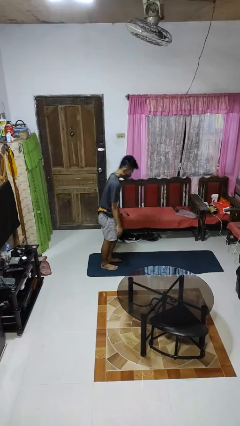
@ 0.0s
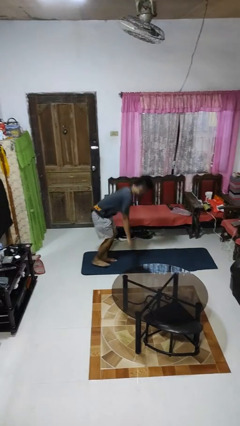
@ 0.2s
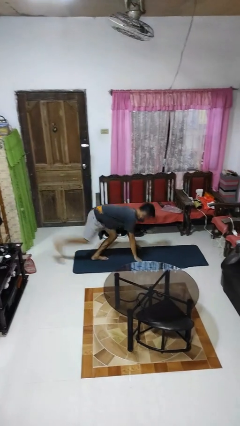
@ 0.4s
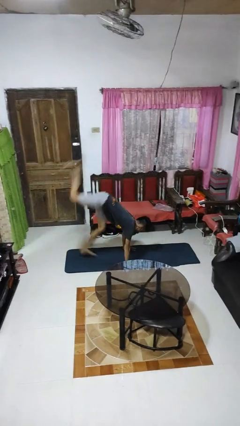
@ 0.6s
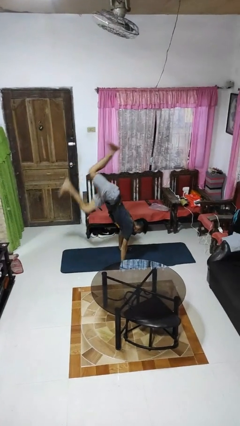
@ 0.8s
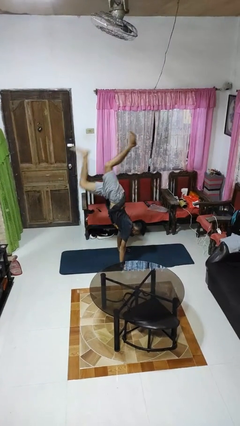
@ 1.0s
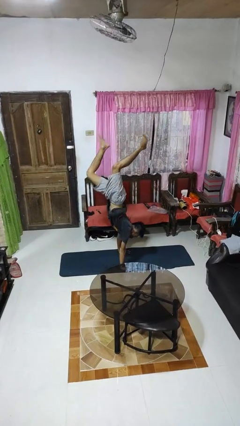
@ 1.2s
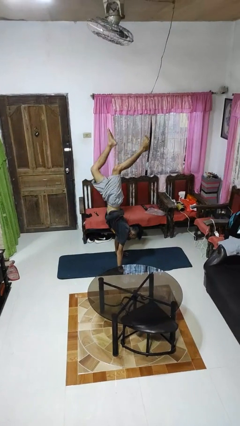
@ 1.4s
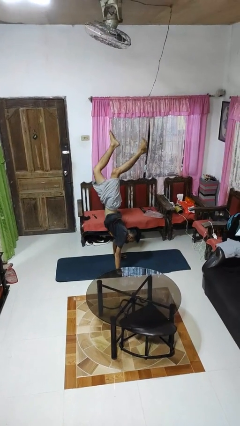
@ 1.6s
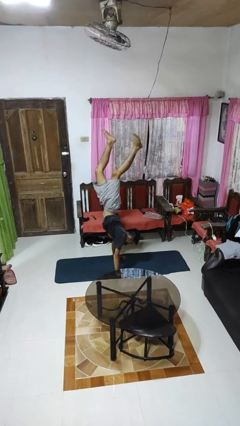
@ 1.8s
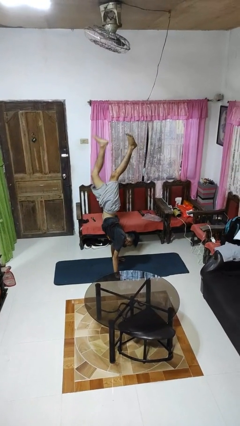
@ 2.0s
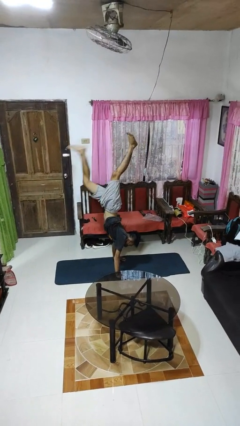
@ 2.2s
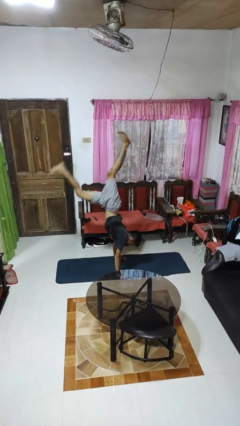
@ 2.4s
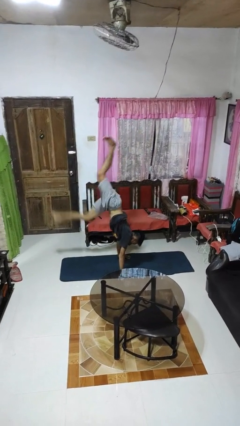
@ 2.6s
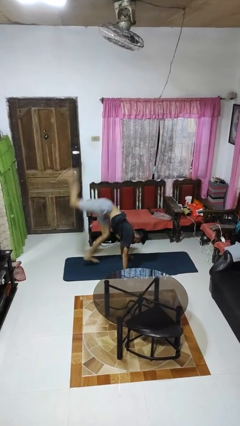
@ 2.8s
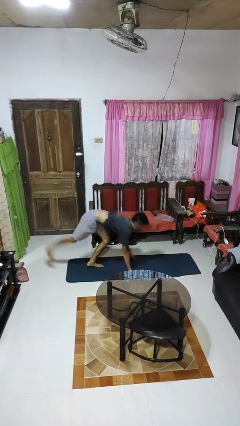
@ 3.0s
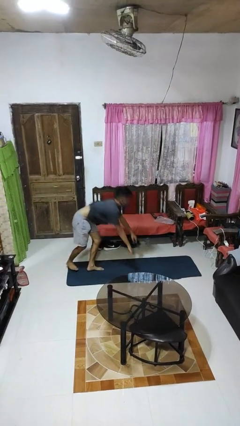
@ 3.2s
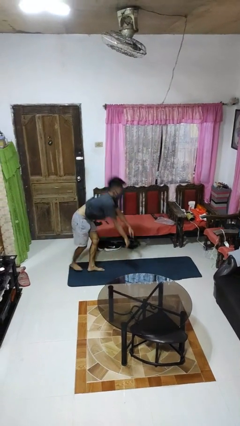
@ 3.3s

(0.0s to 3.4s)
person handstand

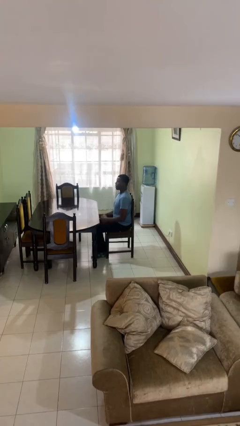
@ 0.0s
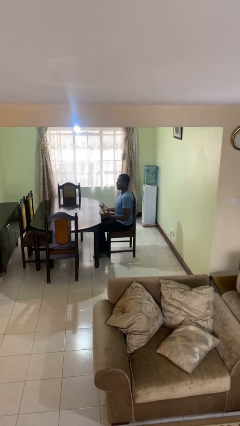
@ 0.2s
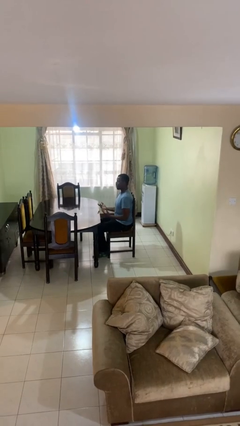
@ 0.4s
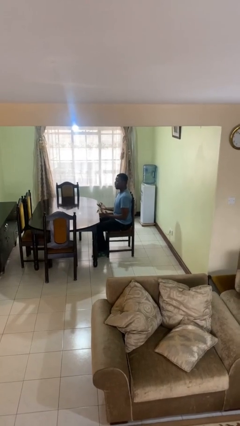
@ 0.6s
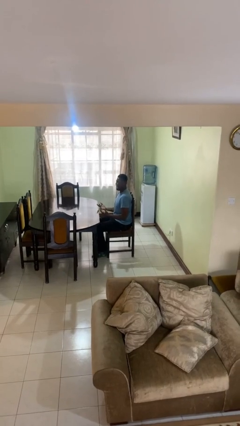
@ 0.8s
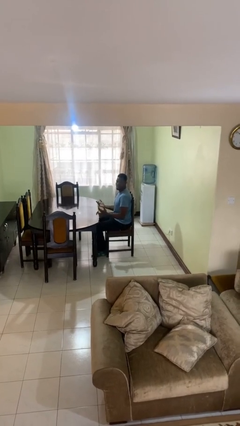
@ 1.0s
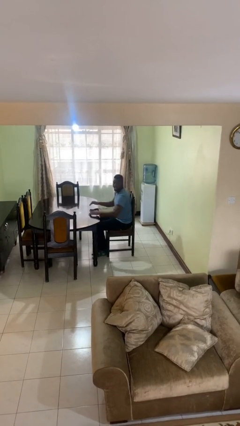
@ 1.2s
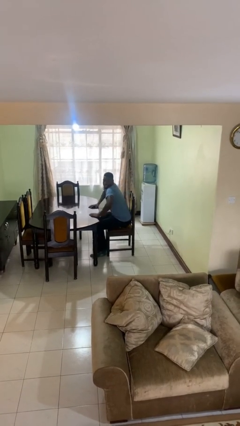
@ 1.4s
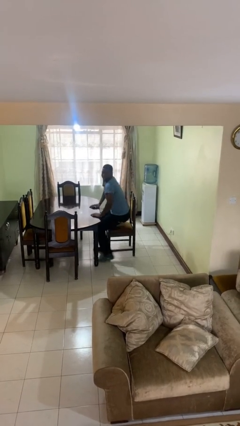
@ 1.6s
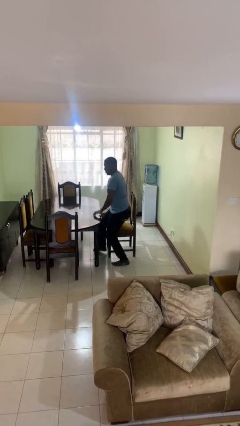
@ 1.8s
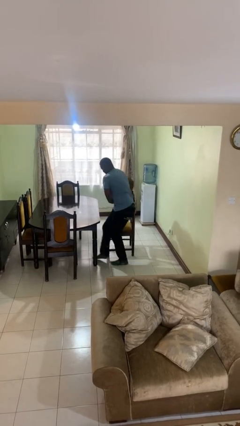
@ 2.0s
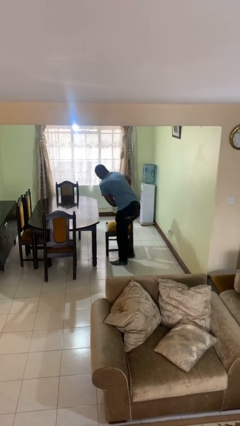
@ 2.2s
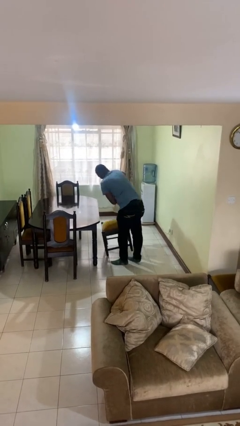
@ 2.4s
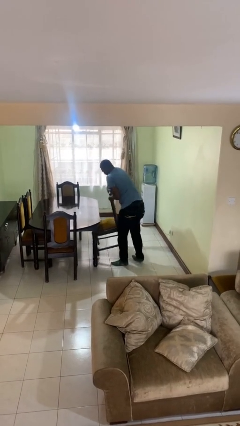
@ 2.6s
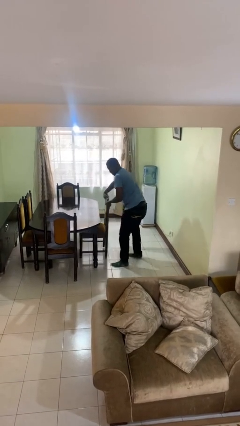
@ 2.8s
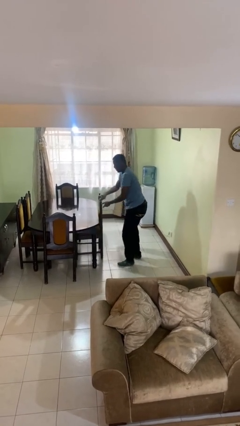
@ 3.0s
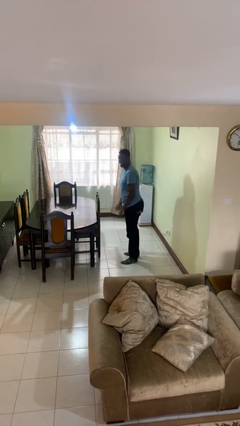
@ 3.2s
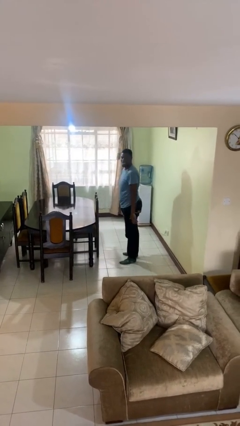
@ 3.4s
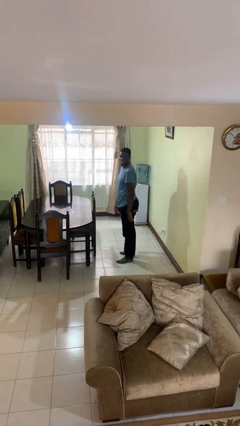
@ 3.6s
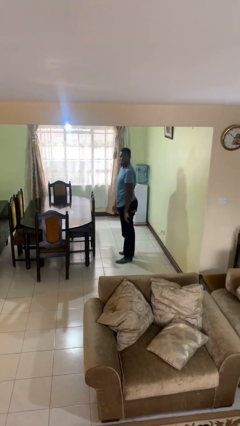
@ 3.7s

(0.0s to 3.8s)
person stands up

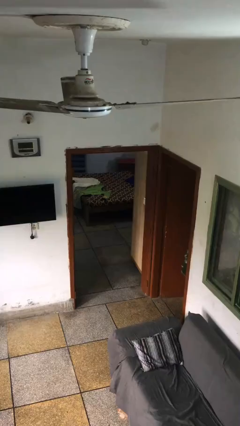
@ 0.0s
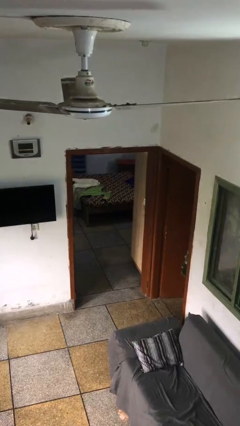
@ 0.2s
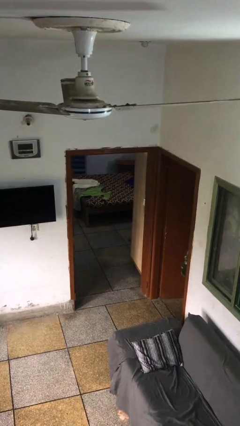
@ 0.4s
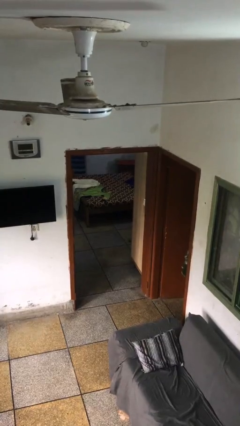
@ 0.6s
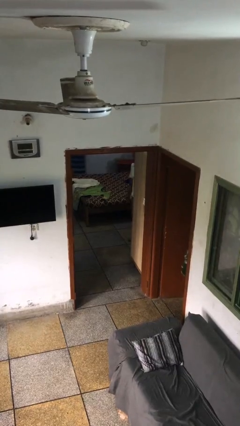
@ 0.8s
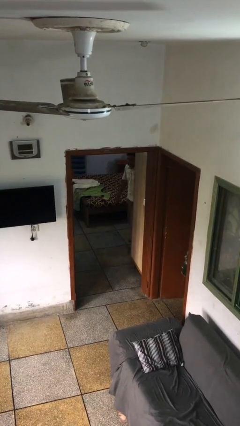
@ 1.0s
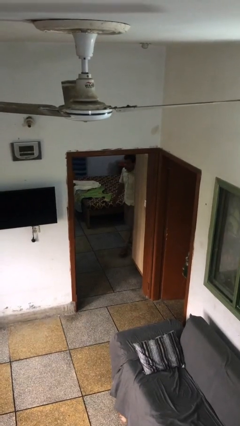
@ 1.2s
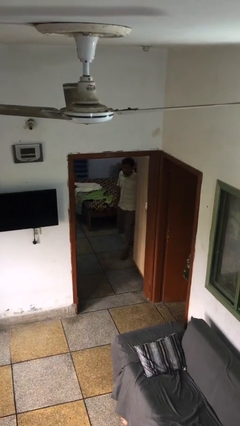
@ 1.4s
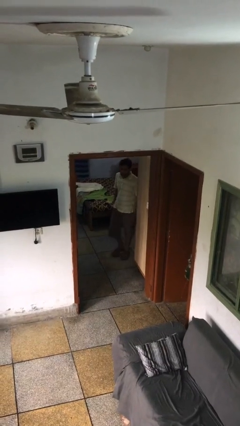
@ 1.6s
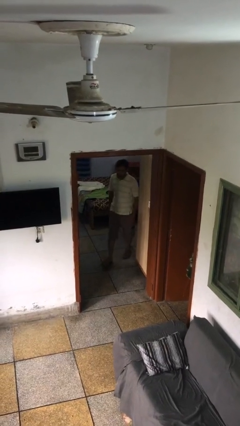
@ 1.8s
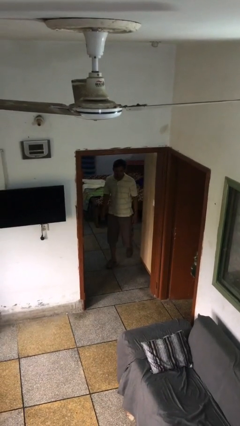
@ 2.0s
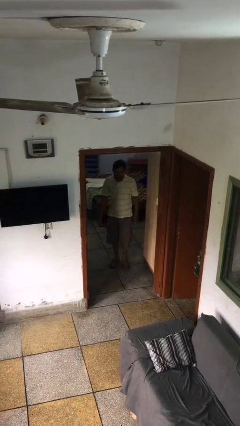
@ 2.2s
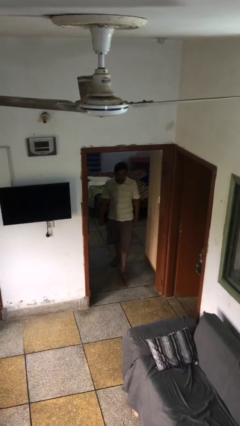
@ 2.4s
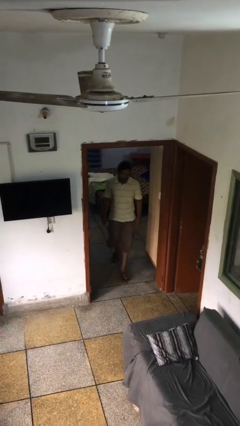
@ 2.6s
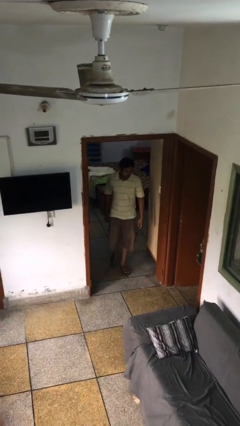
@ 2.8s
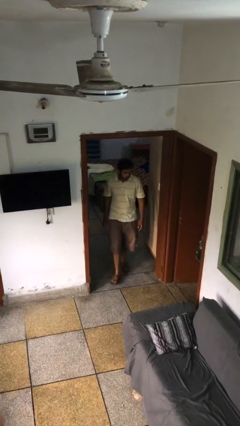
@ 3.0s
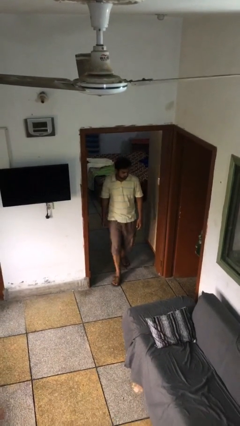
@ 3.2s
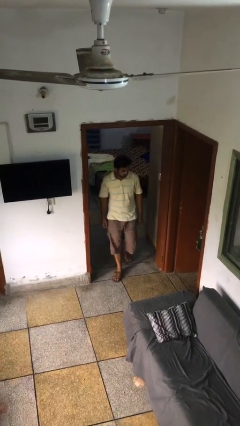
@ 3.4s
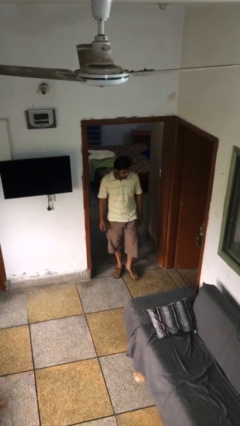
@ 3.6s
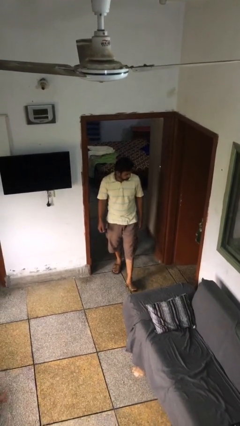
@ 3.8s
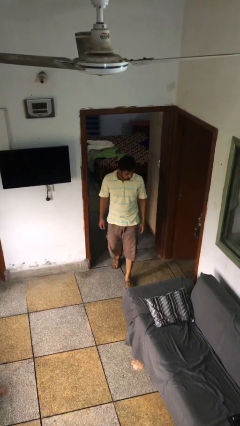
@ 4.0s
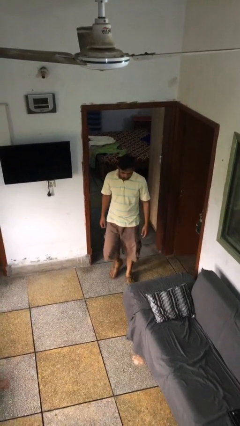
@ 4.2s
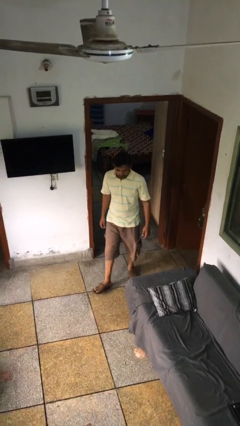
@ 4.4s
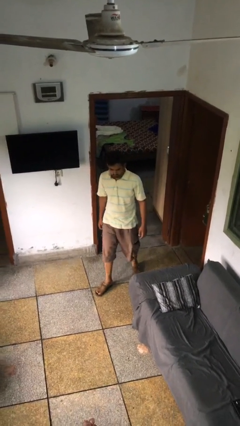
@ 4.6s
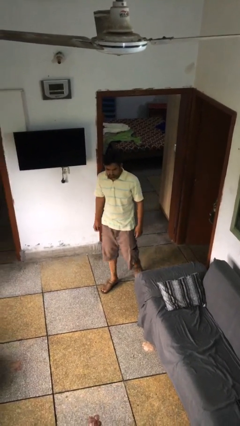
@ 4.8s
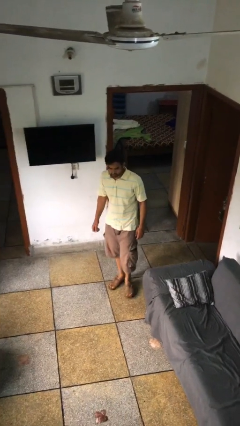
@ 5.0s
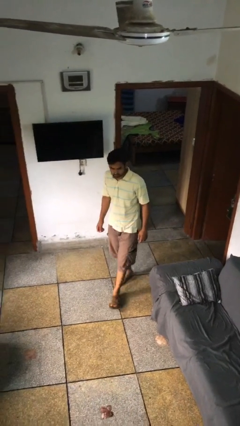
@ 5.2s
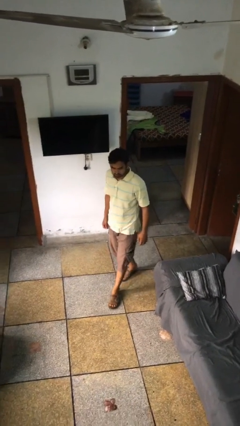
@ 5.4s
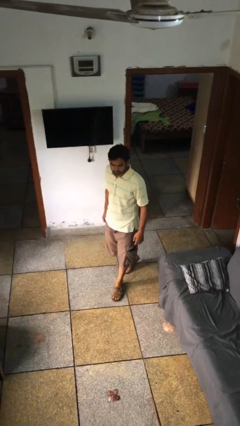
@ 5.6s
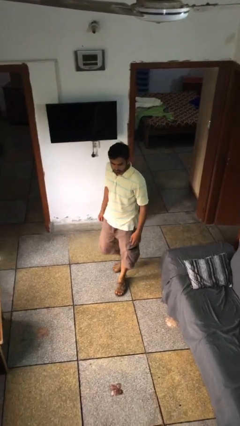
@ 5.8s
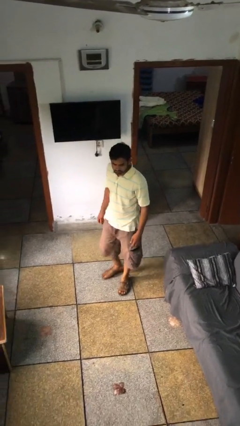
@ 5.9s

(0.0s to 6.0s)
person enters scene through structure

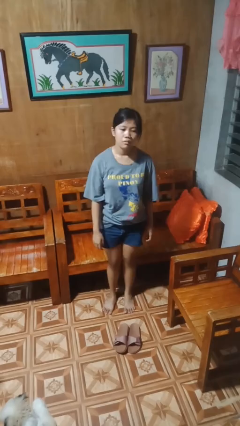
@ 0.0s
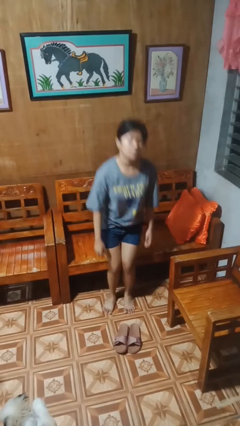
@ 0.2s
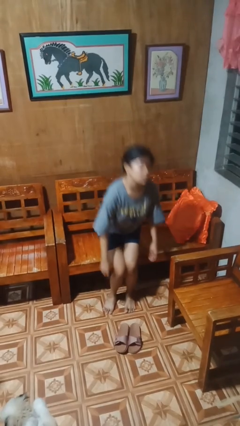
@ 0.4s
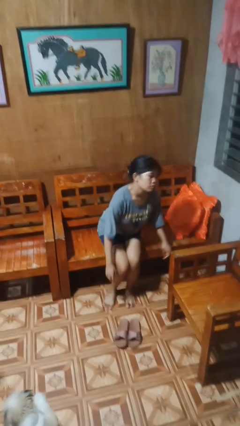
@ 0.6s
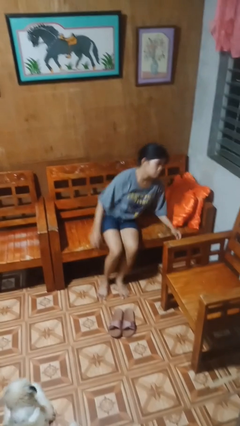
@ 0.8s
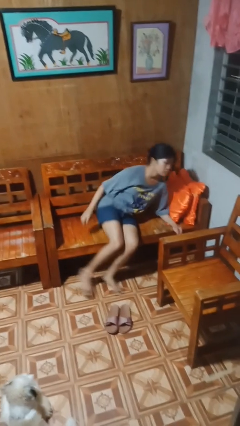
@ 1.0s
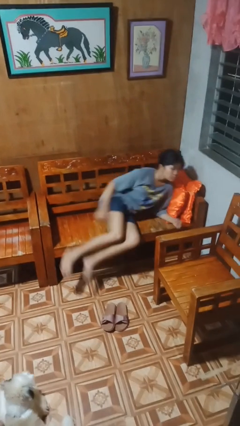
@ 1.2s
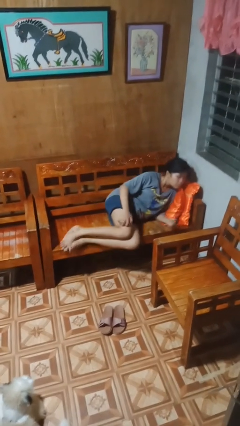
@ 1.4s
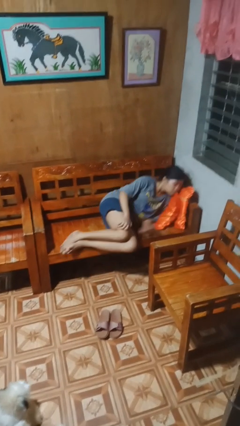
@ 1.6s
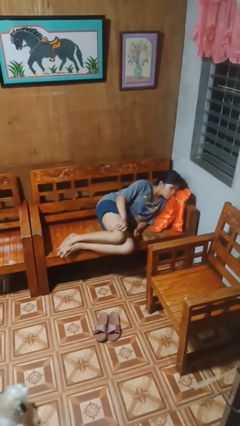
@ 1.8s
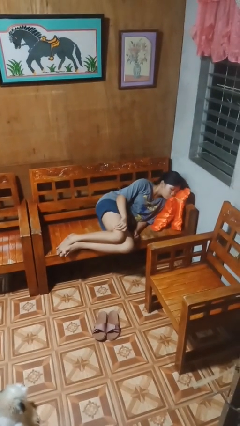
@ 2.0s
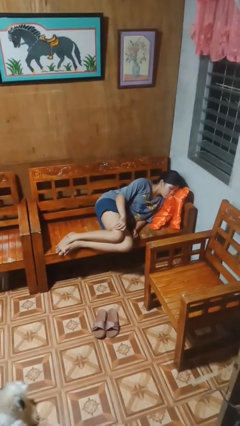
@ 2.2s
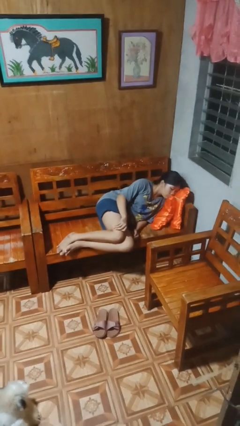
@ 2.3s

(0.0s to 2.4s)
person lies down on couch

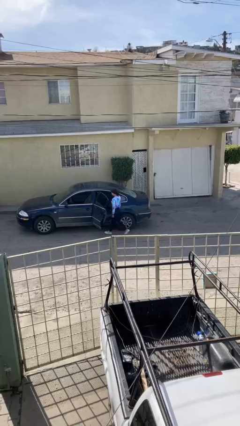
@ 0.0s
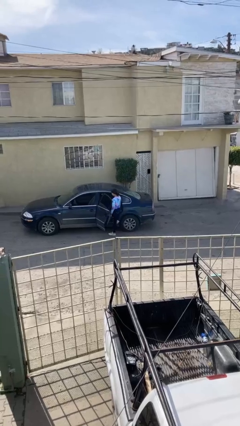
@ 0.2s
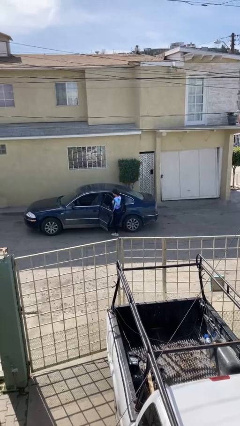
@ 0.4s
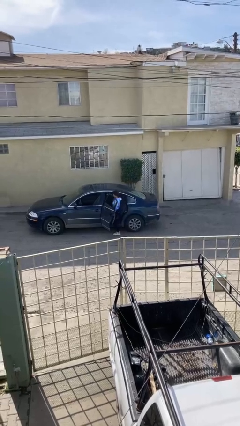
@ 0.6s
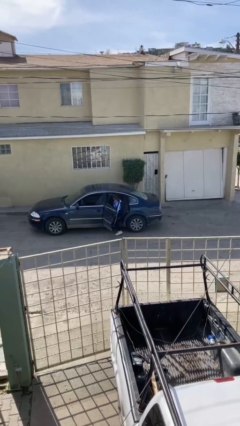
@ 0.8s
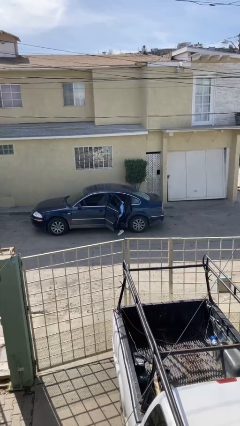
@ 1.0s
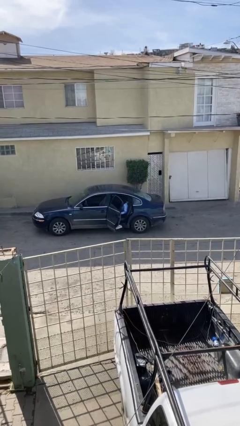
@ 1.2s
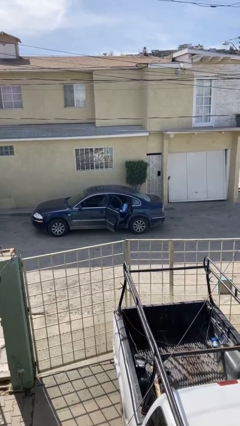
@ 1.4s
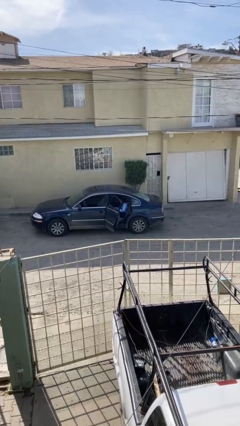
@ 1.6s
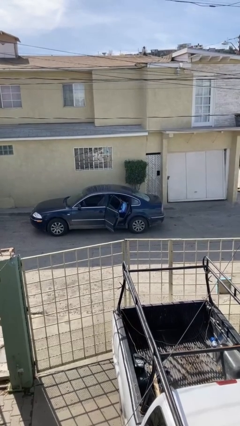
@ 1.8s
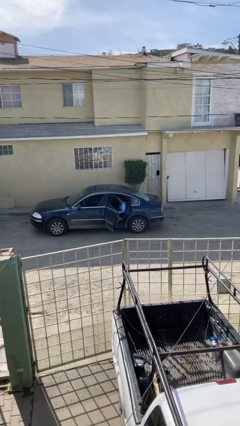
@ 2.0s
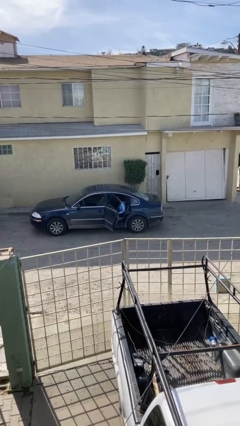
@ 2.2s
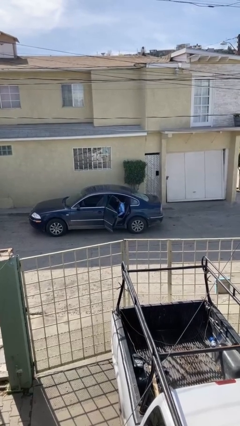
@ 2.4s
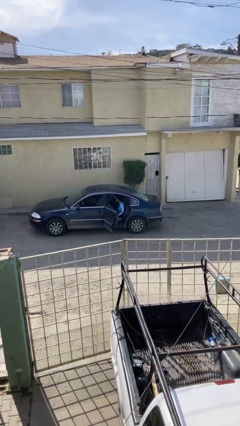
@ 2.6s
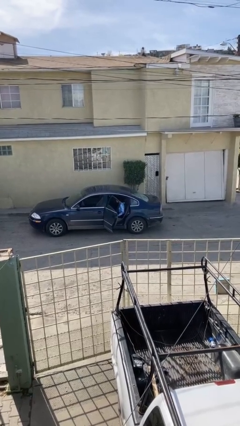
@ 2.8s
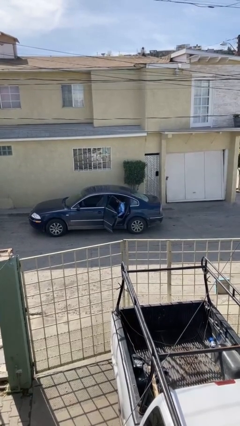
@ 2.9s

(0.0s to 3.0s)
person enters car
